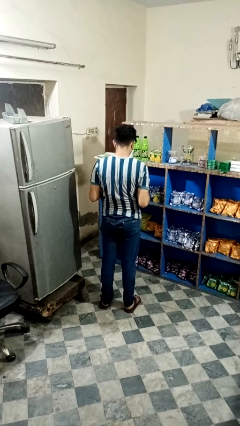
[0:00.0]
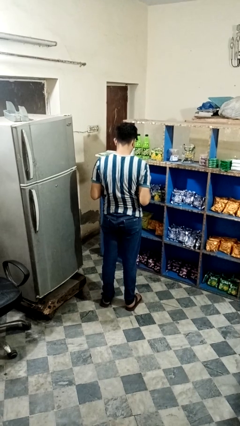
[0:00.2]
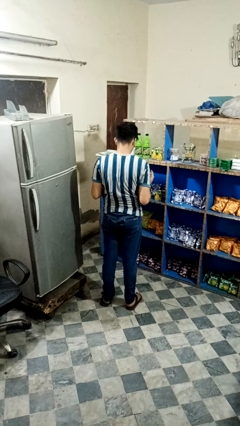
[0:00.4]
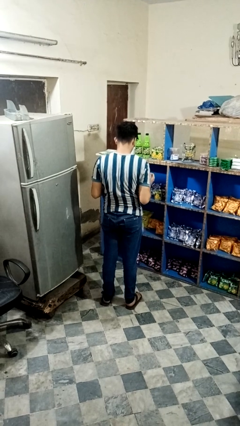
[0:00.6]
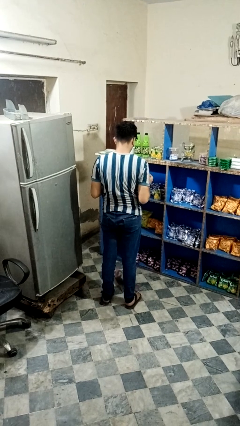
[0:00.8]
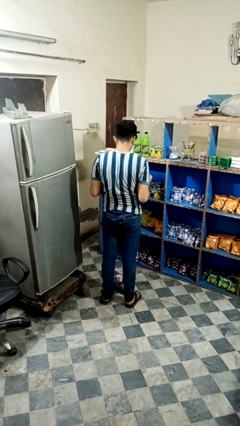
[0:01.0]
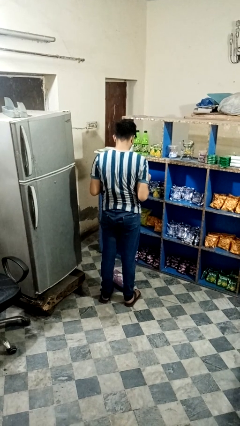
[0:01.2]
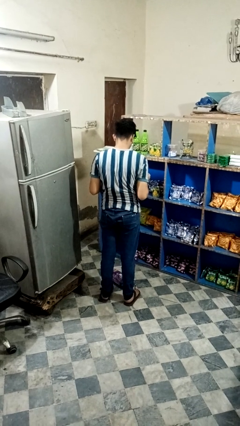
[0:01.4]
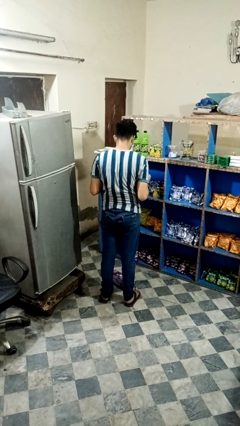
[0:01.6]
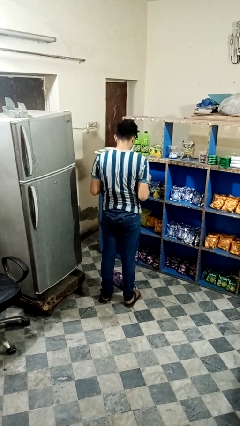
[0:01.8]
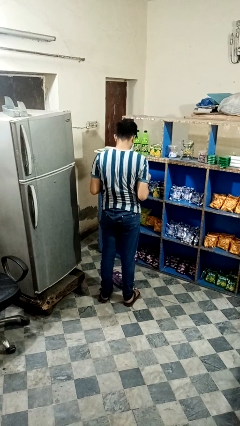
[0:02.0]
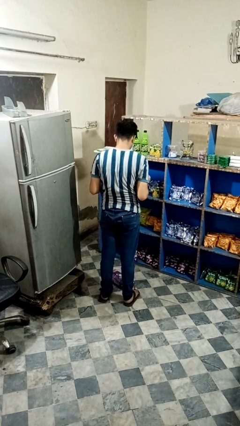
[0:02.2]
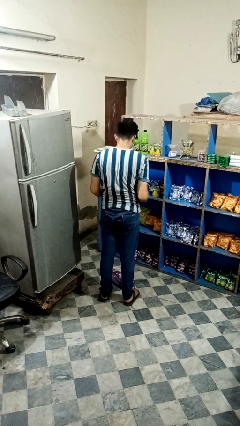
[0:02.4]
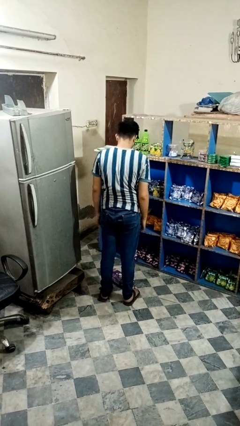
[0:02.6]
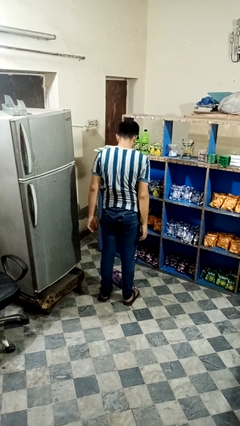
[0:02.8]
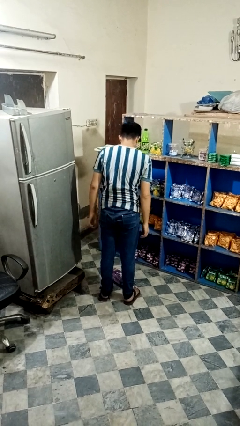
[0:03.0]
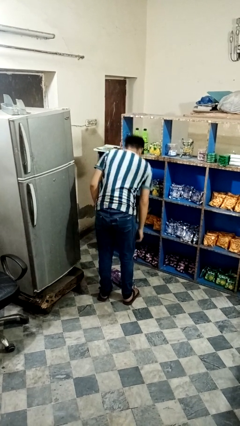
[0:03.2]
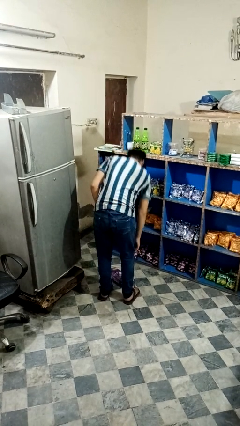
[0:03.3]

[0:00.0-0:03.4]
person drops object

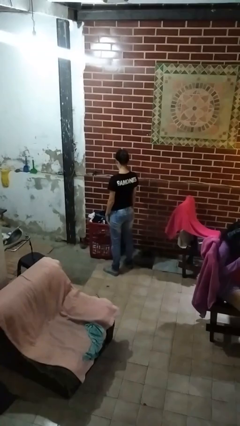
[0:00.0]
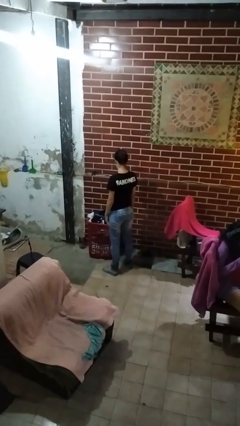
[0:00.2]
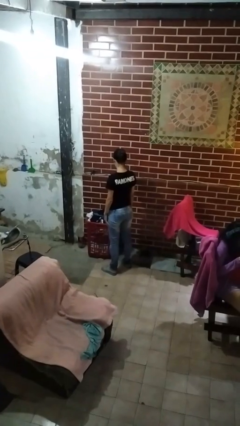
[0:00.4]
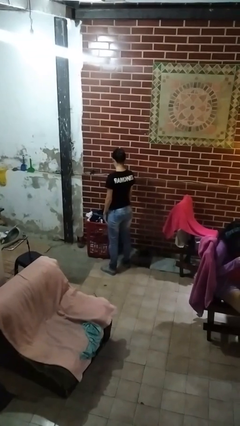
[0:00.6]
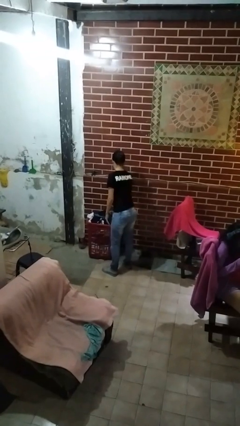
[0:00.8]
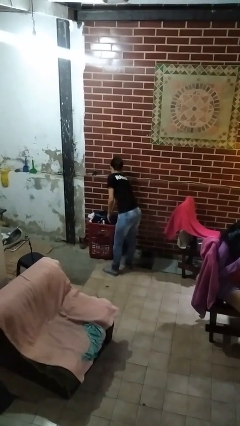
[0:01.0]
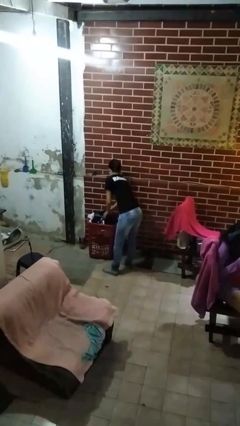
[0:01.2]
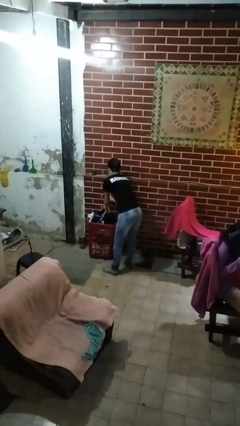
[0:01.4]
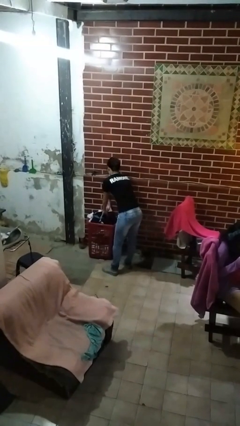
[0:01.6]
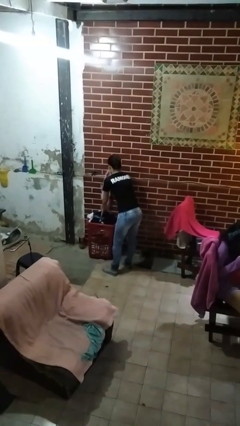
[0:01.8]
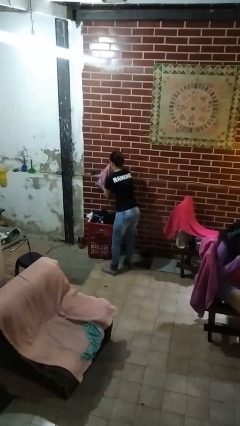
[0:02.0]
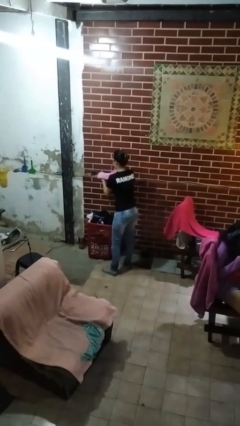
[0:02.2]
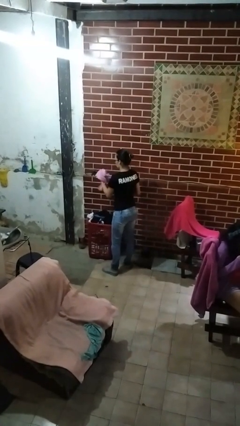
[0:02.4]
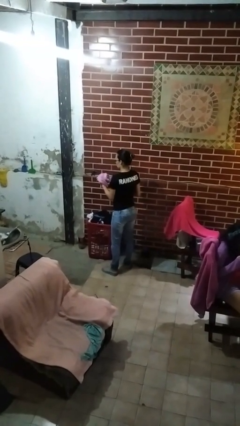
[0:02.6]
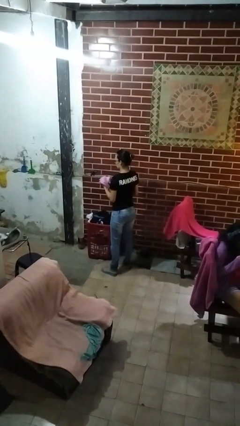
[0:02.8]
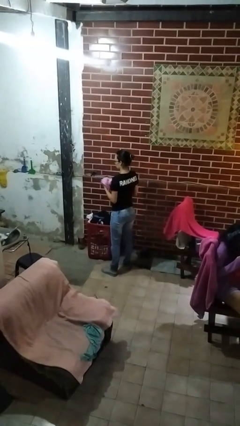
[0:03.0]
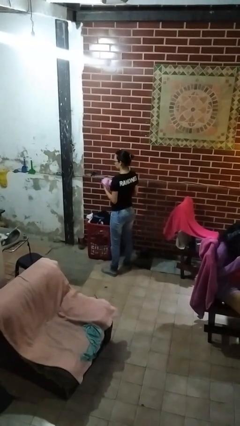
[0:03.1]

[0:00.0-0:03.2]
person takes object from basket

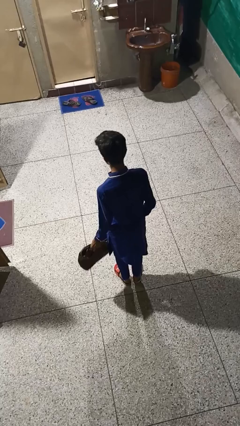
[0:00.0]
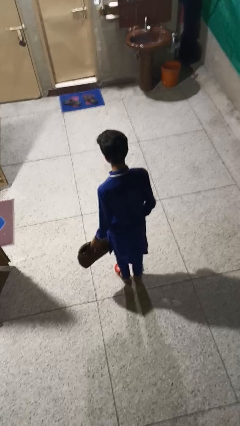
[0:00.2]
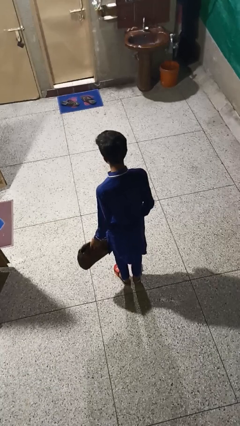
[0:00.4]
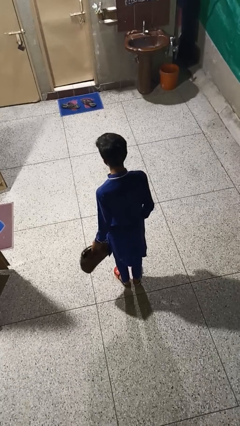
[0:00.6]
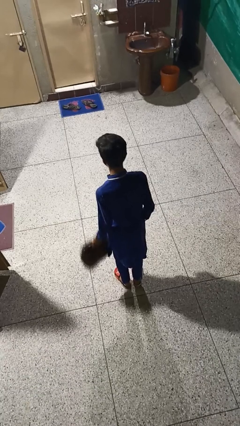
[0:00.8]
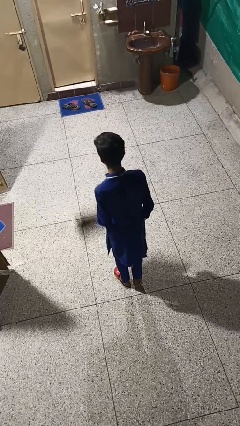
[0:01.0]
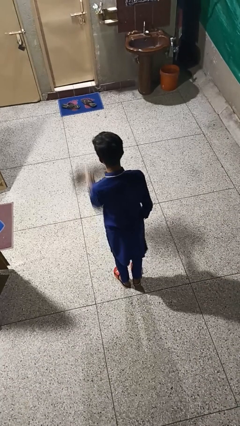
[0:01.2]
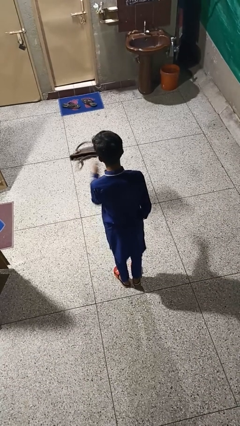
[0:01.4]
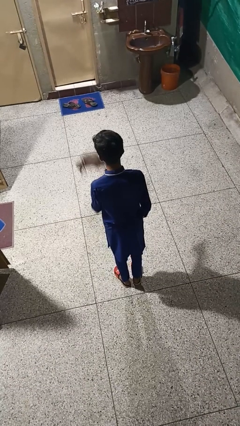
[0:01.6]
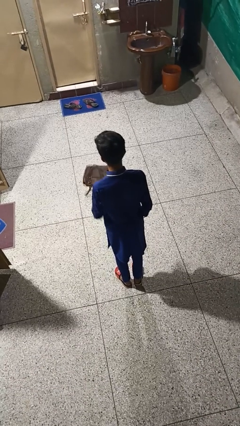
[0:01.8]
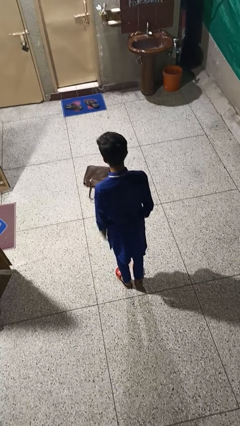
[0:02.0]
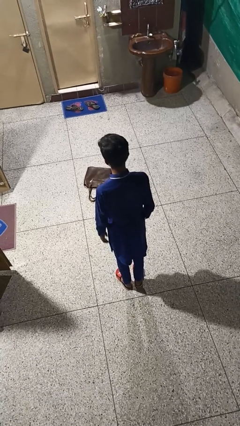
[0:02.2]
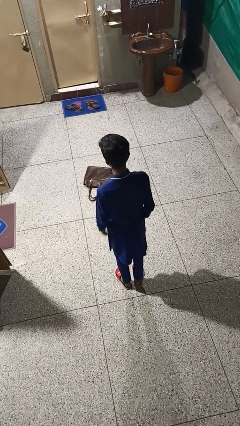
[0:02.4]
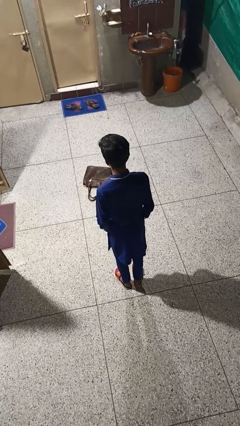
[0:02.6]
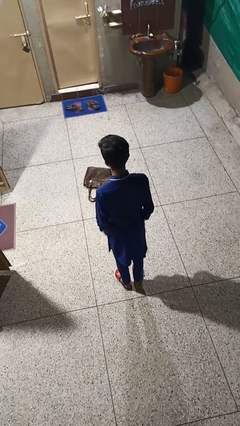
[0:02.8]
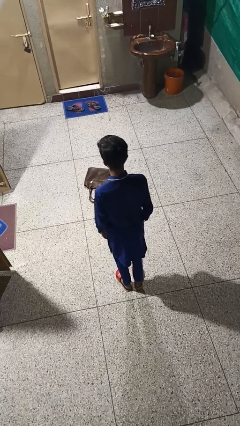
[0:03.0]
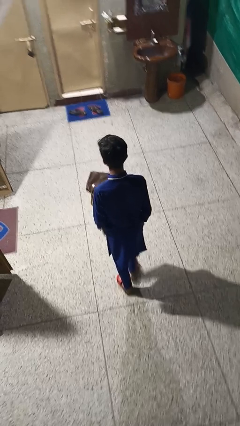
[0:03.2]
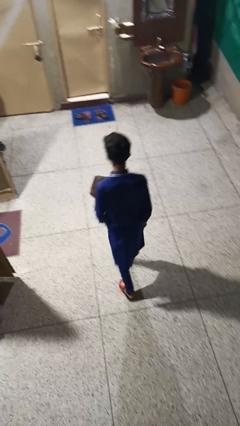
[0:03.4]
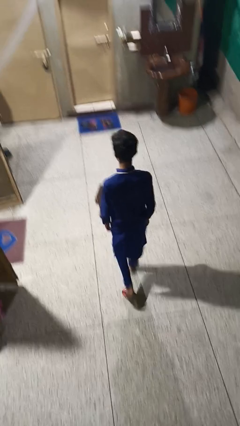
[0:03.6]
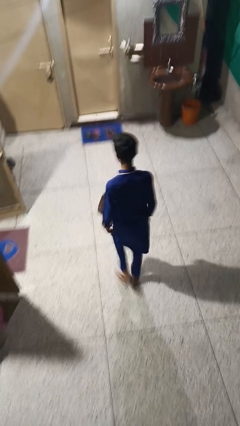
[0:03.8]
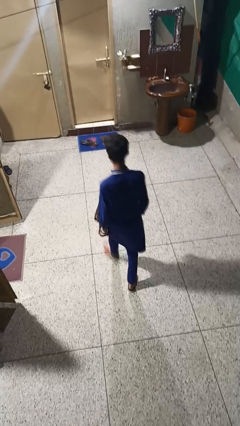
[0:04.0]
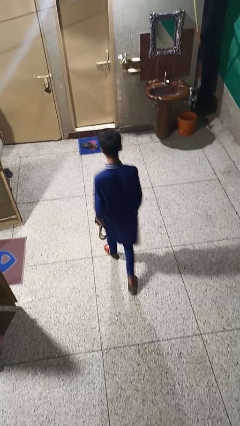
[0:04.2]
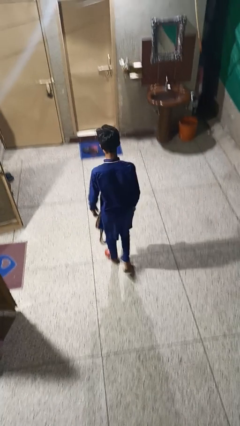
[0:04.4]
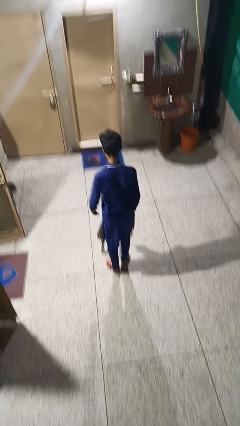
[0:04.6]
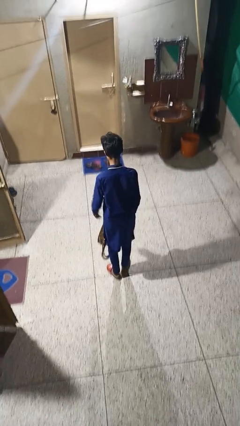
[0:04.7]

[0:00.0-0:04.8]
person throws object to ground

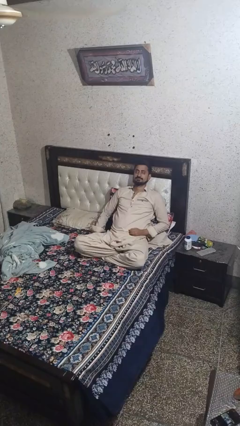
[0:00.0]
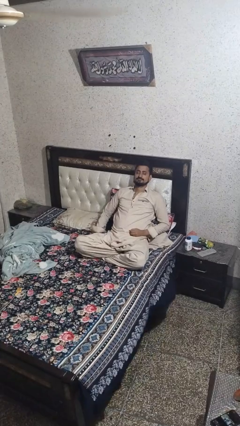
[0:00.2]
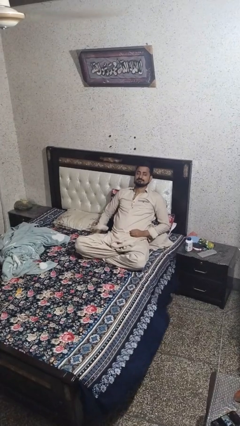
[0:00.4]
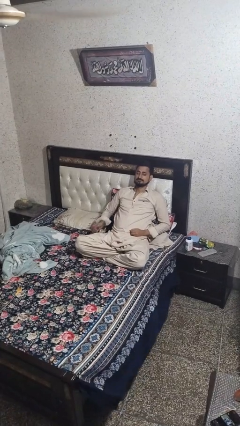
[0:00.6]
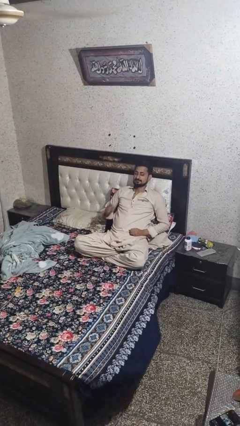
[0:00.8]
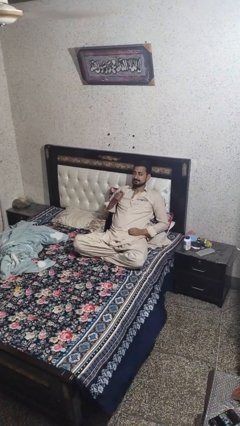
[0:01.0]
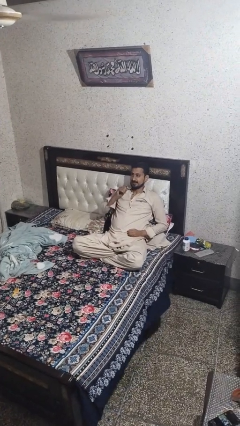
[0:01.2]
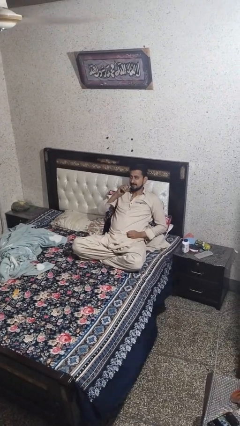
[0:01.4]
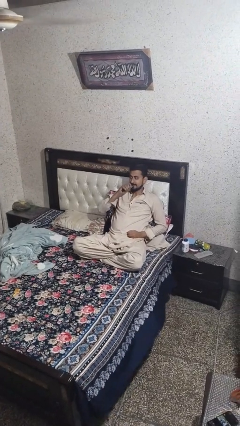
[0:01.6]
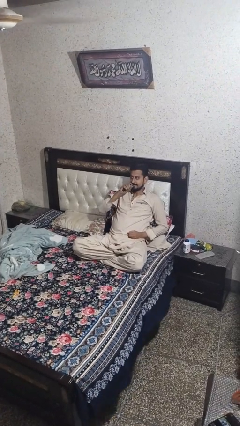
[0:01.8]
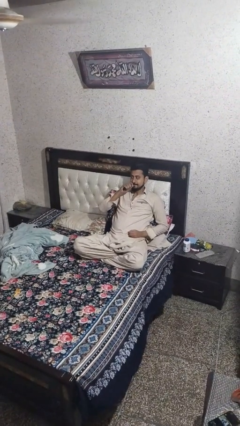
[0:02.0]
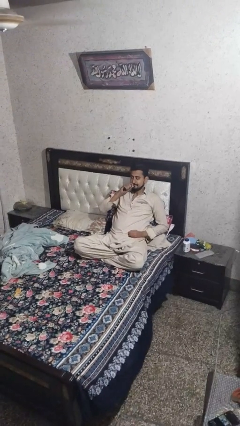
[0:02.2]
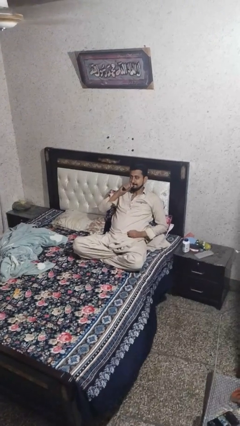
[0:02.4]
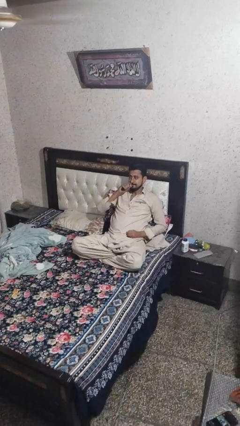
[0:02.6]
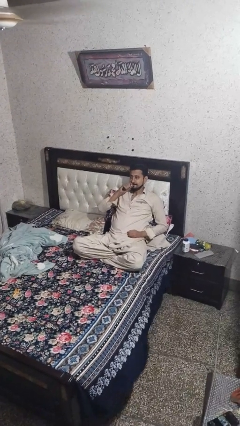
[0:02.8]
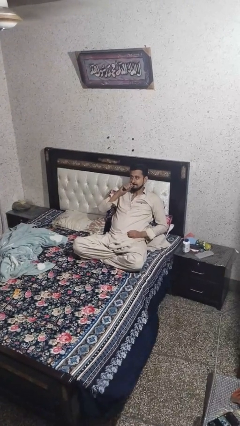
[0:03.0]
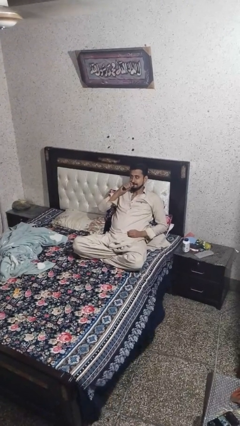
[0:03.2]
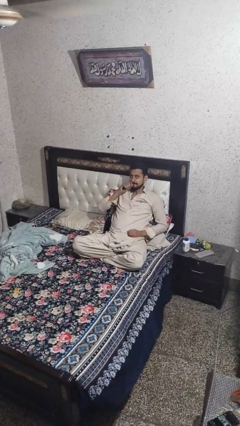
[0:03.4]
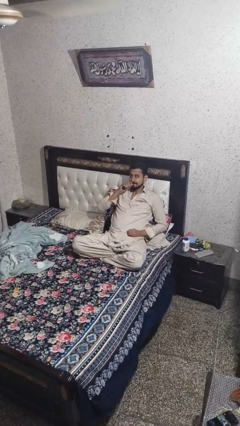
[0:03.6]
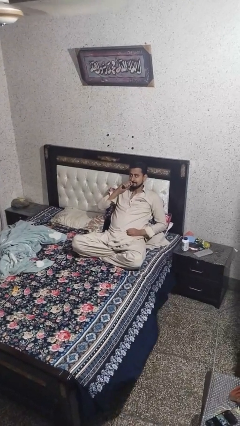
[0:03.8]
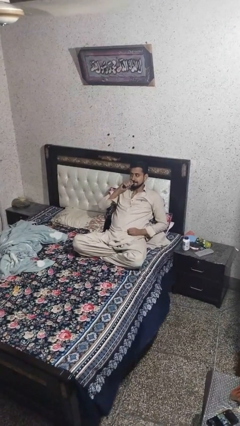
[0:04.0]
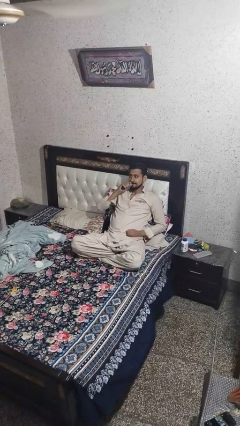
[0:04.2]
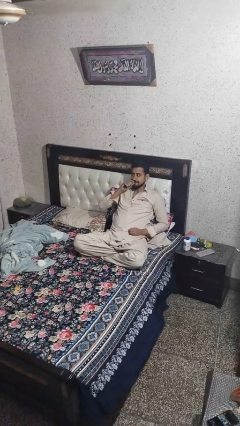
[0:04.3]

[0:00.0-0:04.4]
person vapes

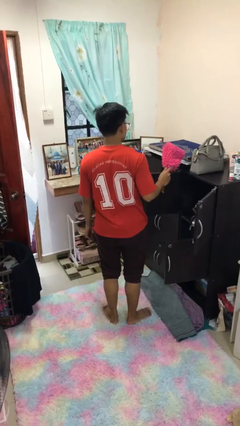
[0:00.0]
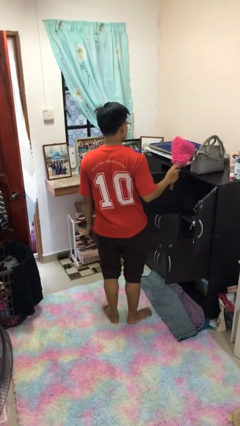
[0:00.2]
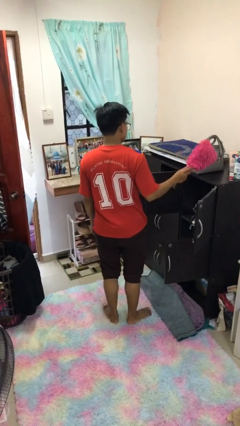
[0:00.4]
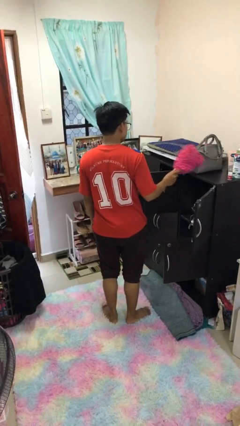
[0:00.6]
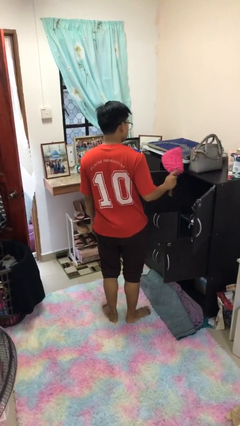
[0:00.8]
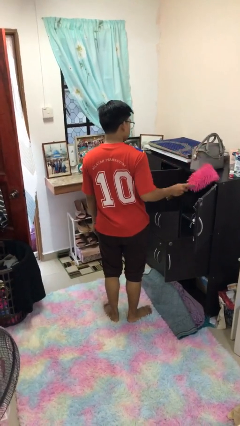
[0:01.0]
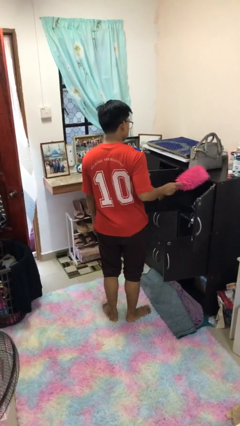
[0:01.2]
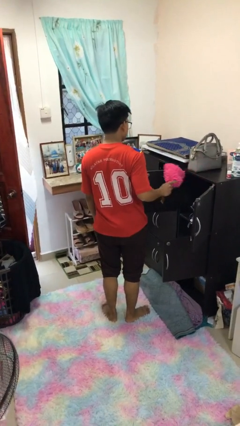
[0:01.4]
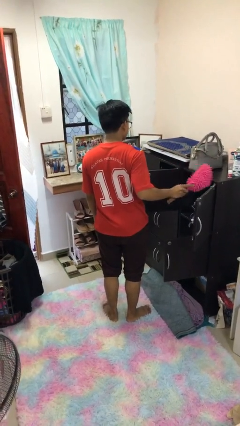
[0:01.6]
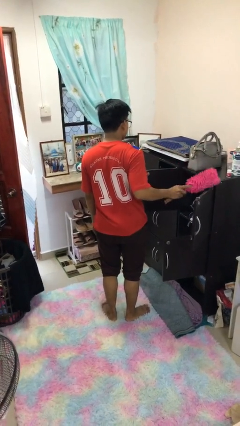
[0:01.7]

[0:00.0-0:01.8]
person dusts furniture
